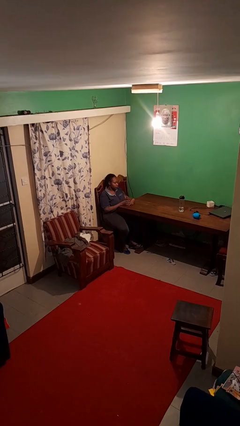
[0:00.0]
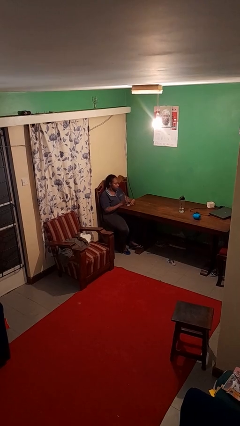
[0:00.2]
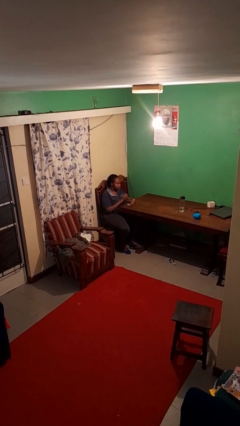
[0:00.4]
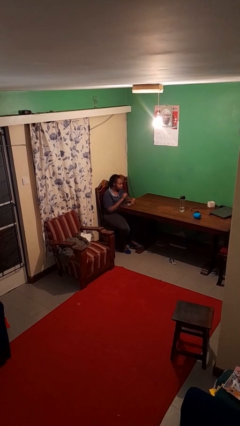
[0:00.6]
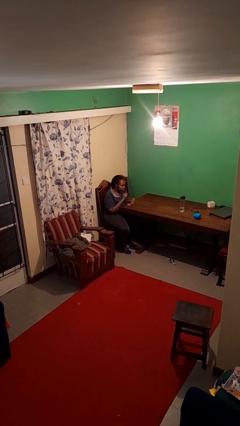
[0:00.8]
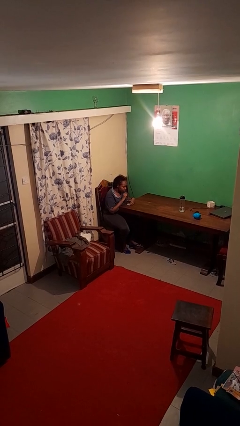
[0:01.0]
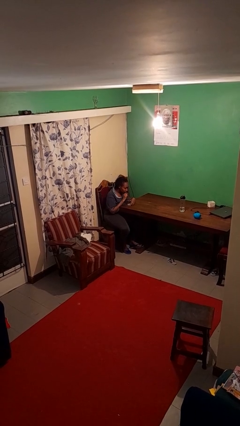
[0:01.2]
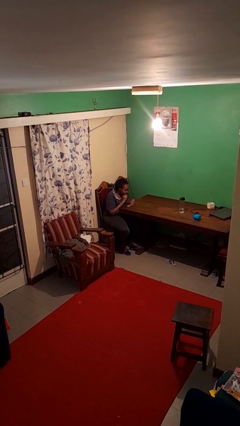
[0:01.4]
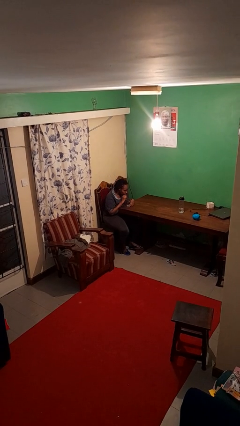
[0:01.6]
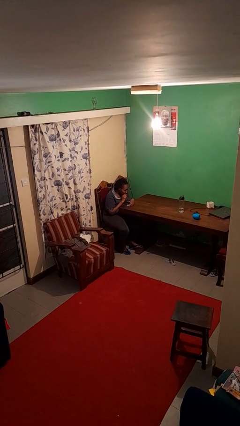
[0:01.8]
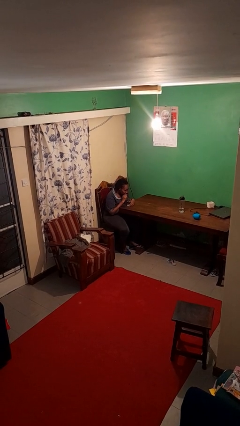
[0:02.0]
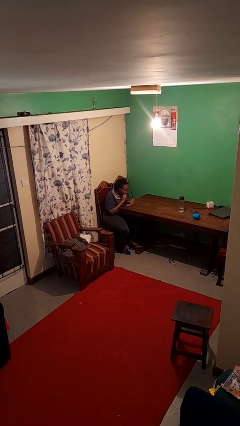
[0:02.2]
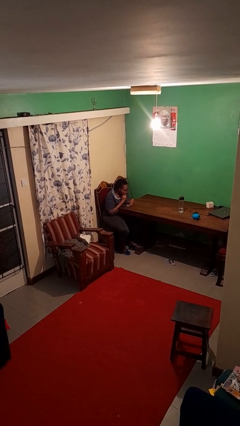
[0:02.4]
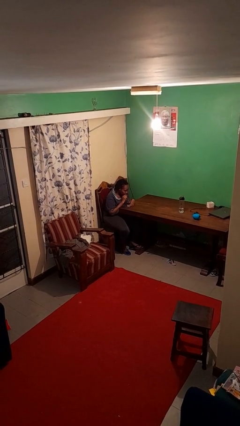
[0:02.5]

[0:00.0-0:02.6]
person drinks from straw

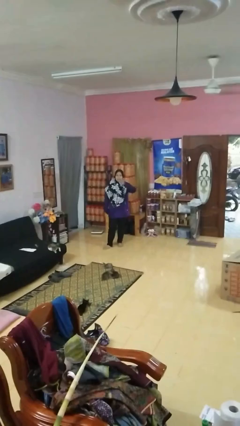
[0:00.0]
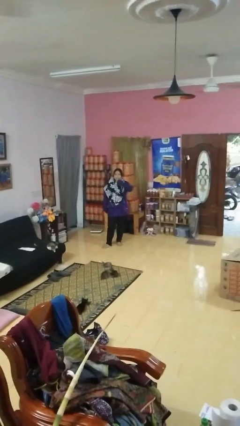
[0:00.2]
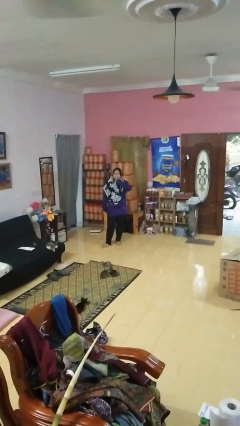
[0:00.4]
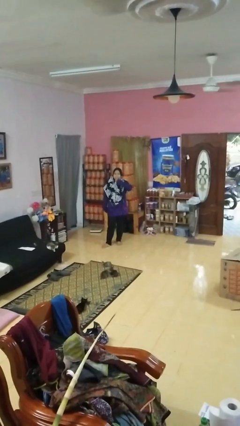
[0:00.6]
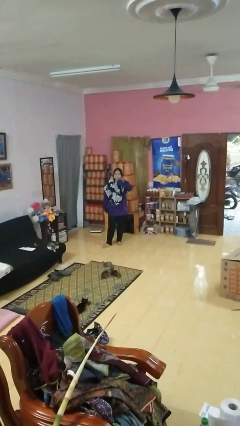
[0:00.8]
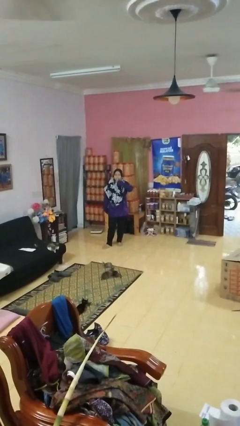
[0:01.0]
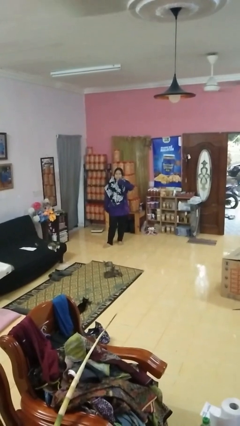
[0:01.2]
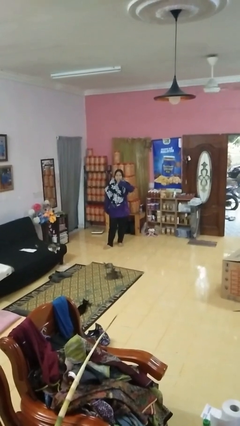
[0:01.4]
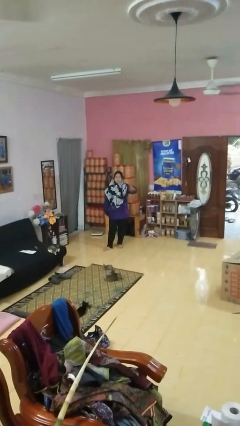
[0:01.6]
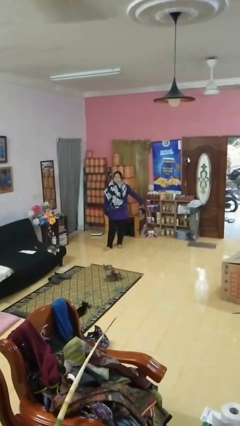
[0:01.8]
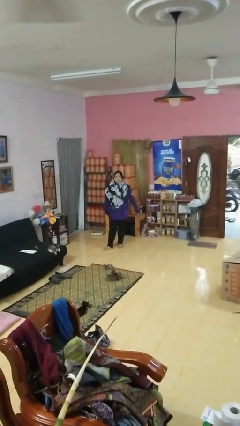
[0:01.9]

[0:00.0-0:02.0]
person gestures be quiet

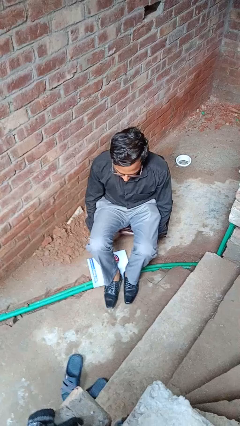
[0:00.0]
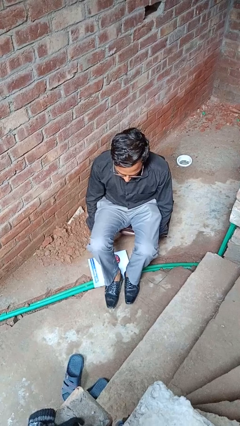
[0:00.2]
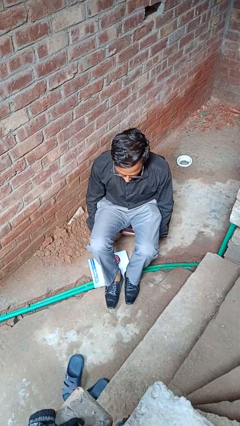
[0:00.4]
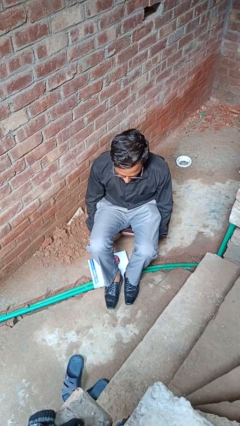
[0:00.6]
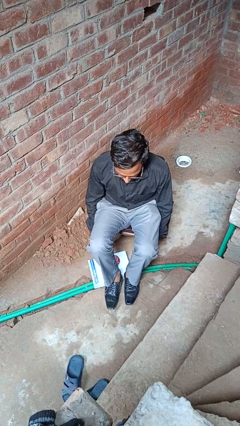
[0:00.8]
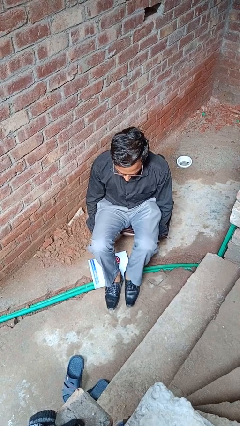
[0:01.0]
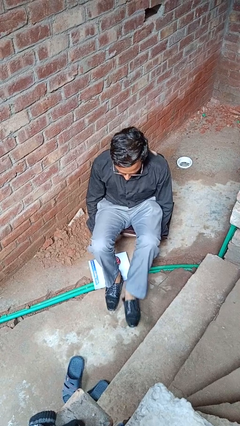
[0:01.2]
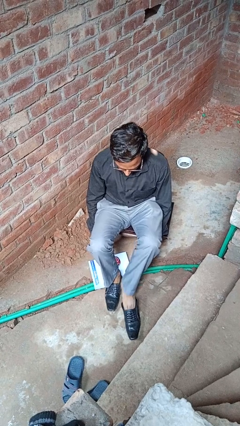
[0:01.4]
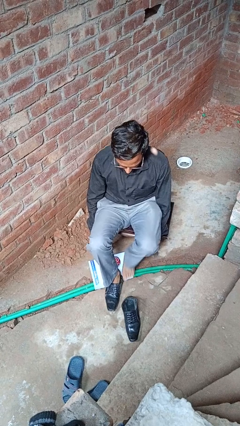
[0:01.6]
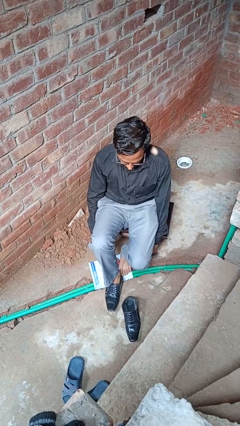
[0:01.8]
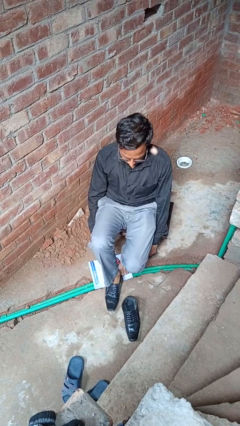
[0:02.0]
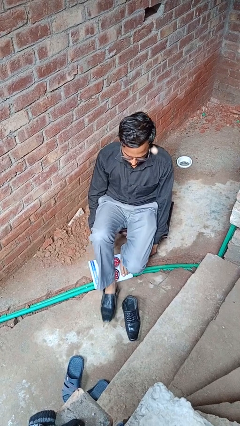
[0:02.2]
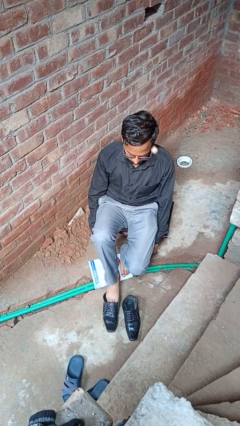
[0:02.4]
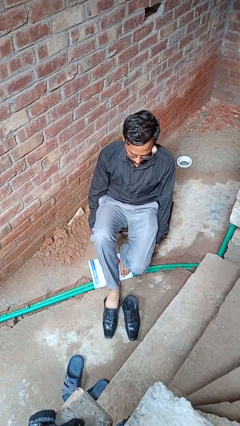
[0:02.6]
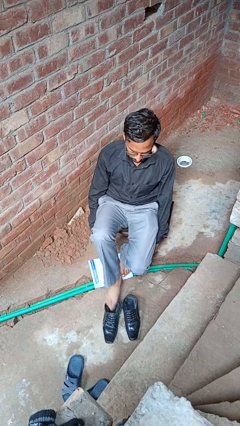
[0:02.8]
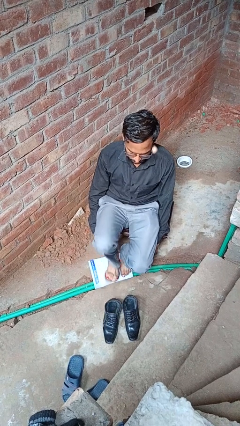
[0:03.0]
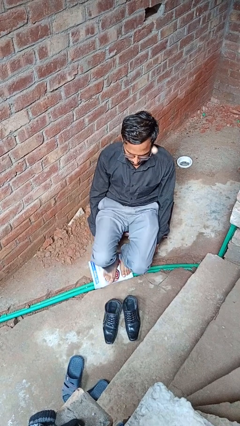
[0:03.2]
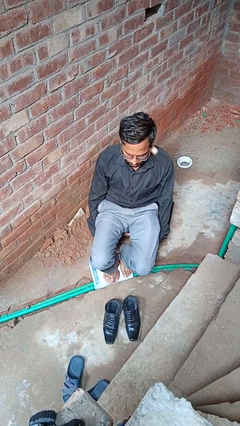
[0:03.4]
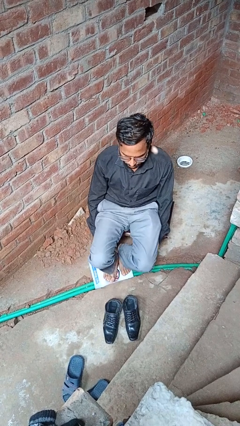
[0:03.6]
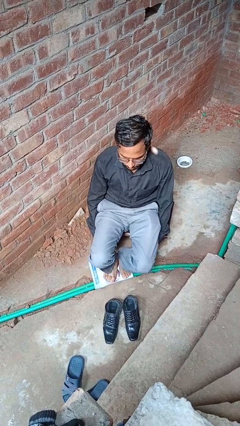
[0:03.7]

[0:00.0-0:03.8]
person takes off shoes

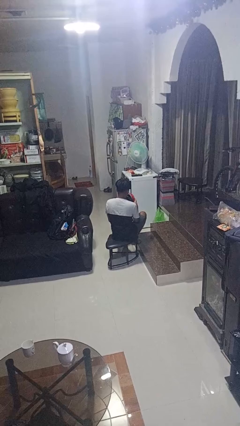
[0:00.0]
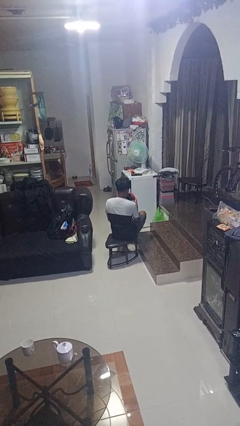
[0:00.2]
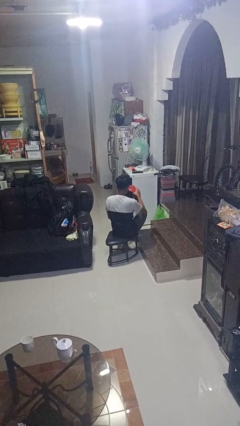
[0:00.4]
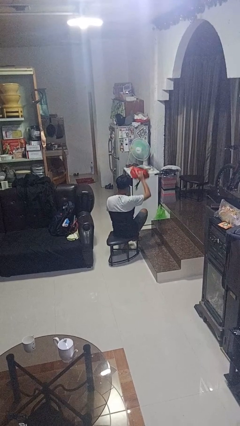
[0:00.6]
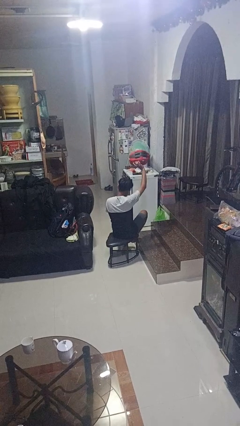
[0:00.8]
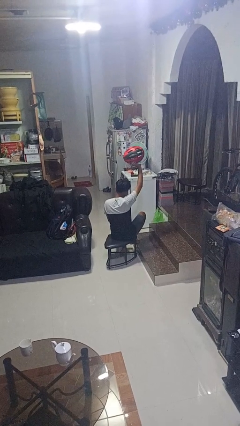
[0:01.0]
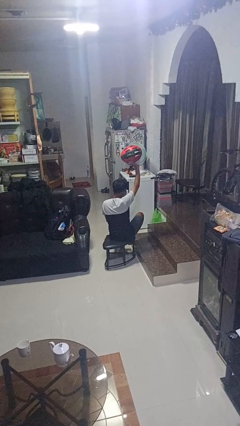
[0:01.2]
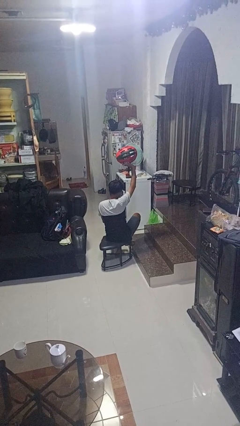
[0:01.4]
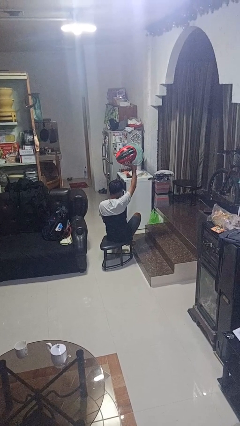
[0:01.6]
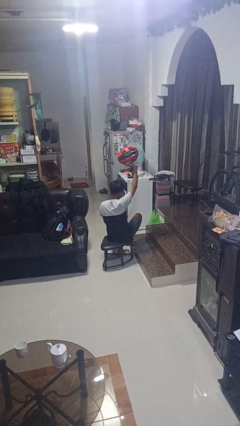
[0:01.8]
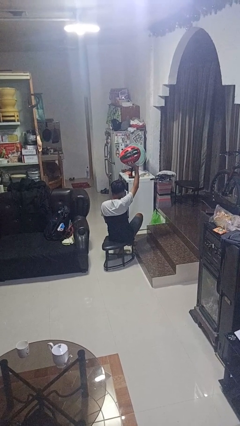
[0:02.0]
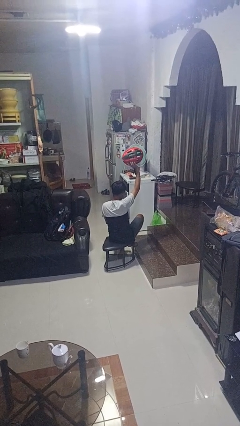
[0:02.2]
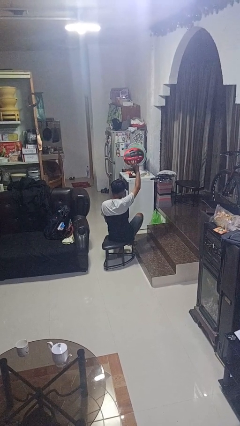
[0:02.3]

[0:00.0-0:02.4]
person holds object above head

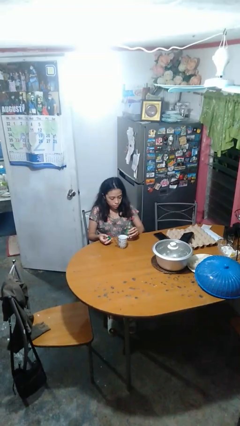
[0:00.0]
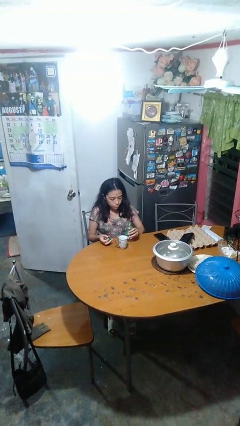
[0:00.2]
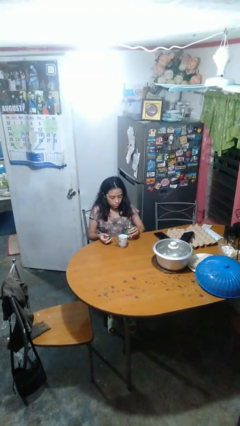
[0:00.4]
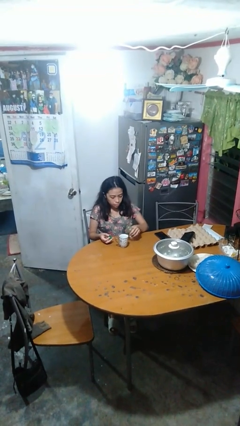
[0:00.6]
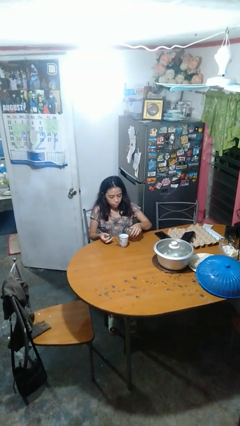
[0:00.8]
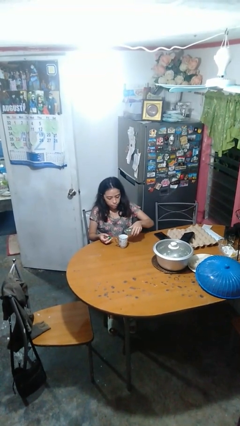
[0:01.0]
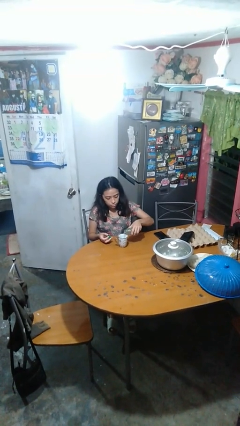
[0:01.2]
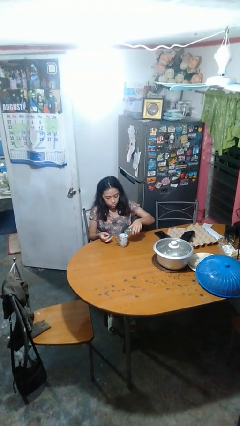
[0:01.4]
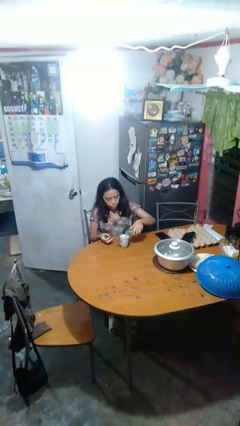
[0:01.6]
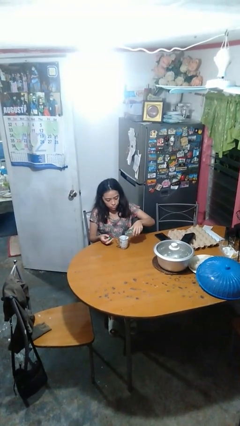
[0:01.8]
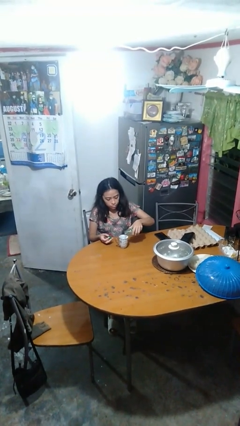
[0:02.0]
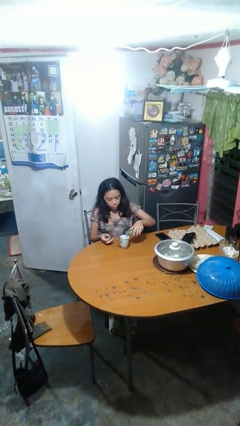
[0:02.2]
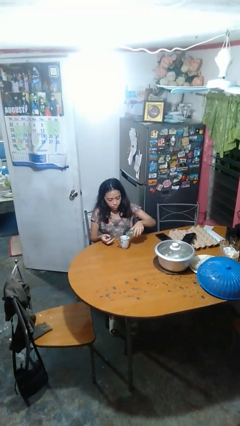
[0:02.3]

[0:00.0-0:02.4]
person pours liquid into cup

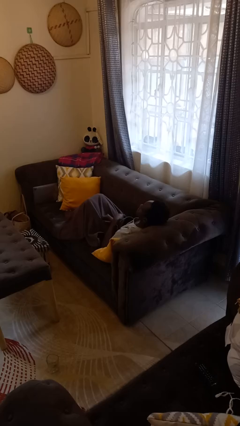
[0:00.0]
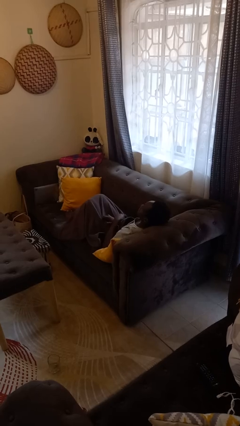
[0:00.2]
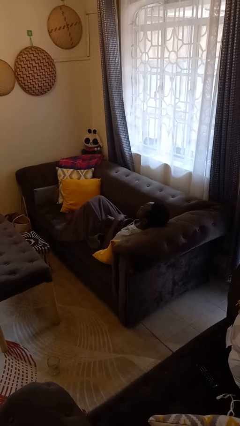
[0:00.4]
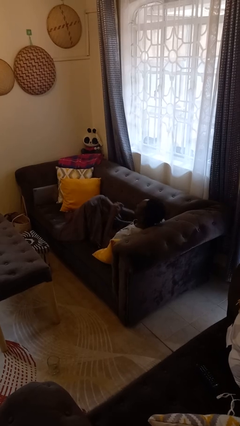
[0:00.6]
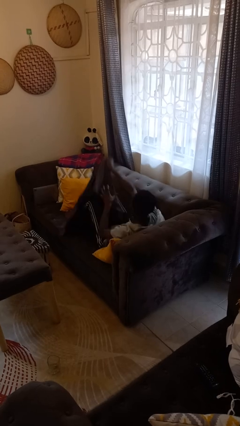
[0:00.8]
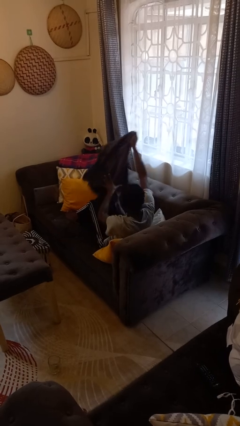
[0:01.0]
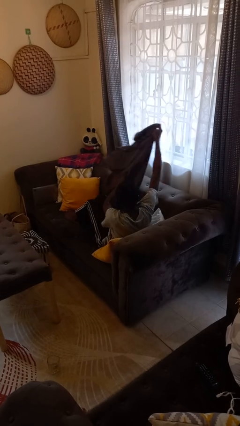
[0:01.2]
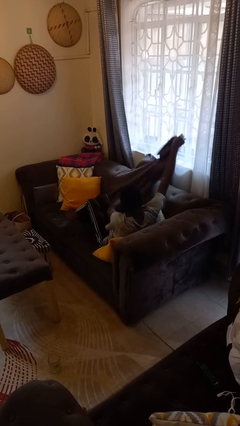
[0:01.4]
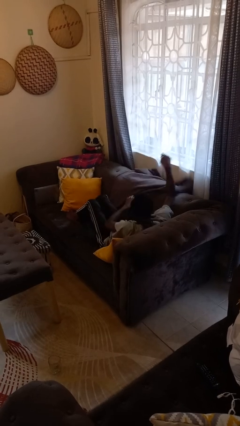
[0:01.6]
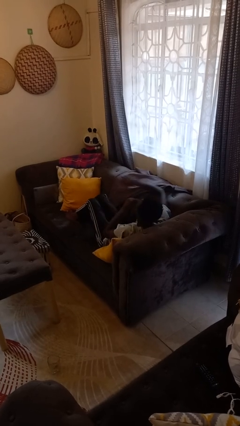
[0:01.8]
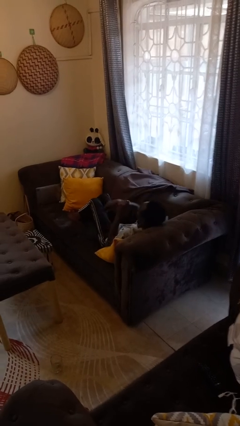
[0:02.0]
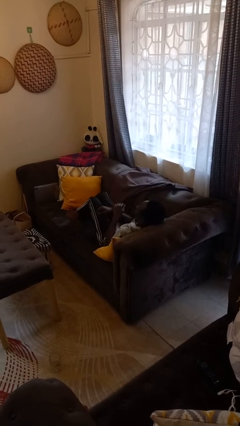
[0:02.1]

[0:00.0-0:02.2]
person uncovers with blanket

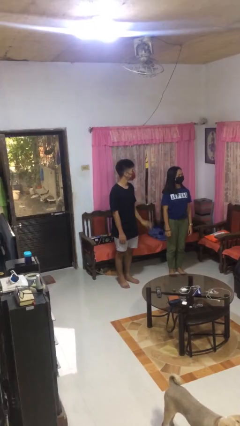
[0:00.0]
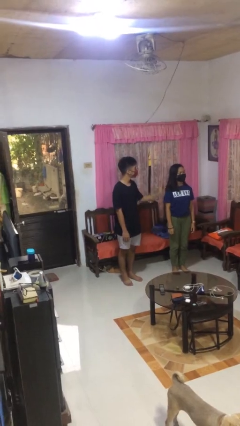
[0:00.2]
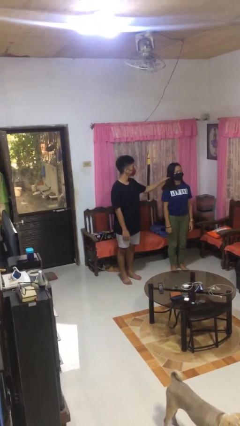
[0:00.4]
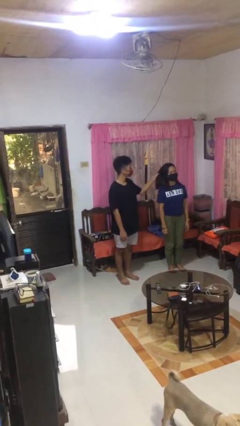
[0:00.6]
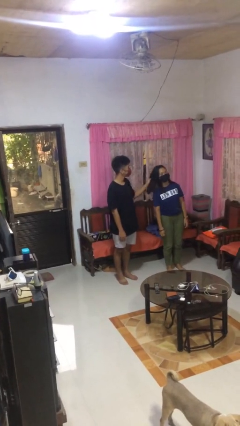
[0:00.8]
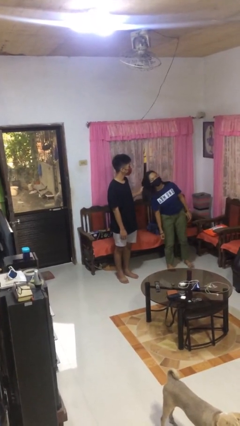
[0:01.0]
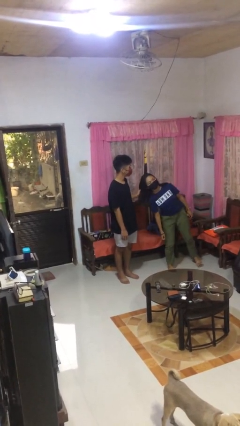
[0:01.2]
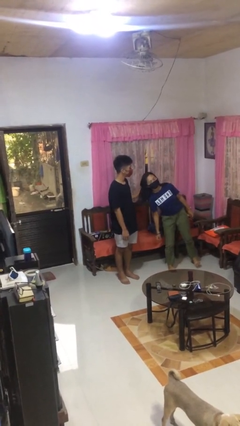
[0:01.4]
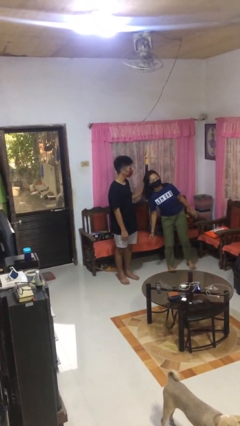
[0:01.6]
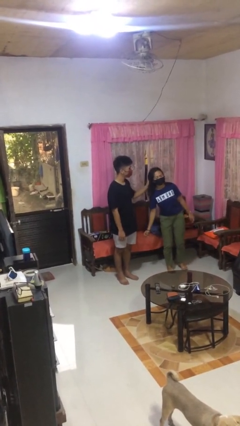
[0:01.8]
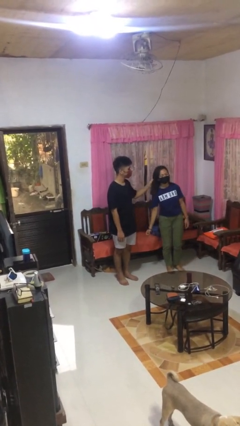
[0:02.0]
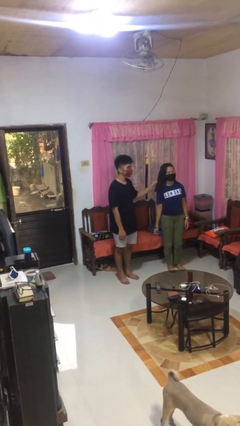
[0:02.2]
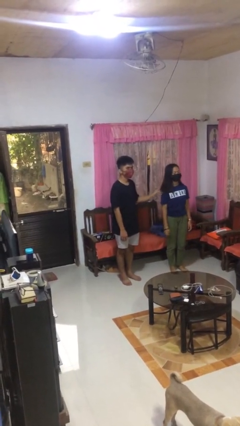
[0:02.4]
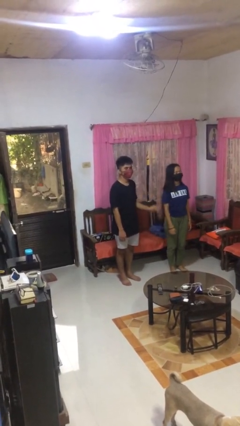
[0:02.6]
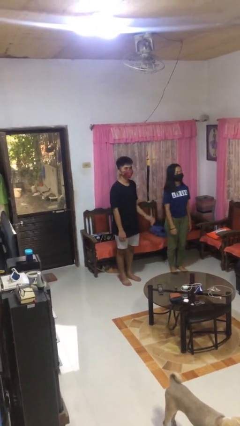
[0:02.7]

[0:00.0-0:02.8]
person grabs person by hair
